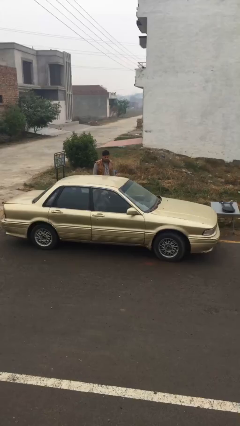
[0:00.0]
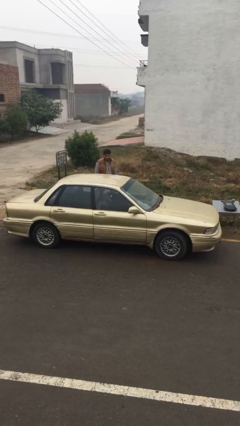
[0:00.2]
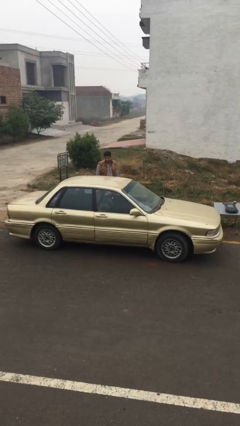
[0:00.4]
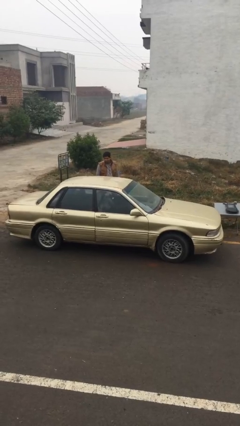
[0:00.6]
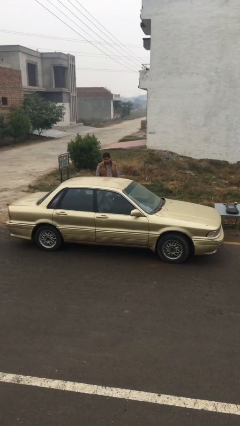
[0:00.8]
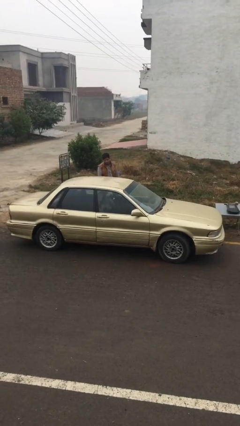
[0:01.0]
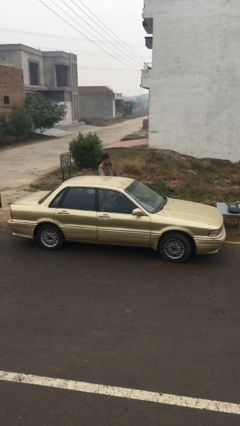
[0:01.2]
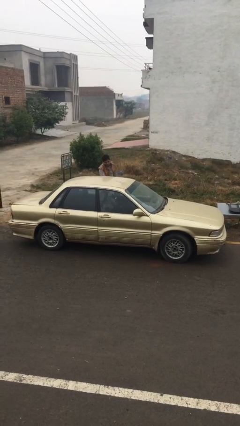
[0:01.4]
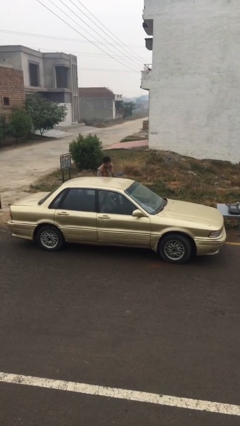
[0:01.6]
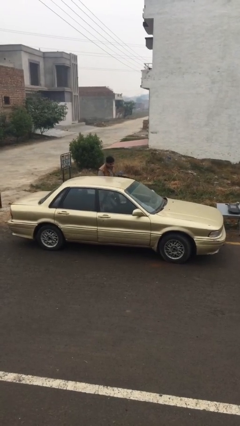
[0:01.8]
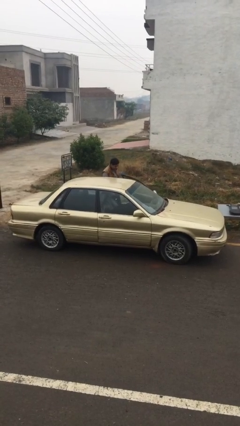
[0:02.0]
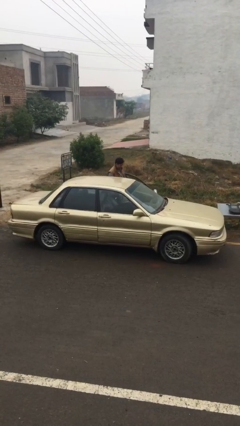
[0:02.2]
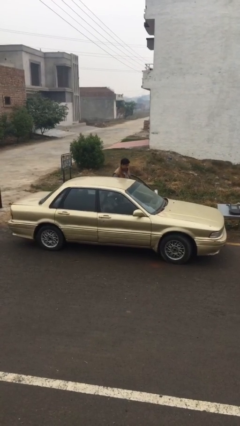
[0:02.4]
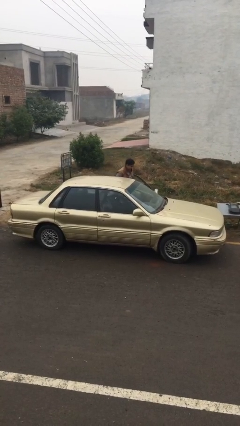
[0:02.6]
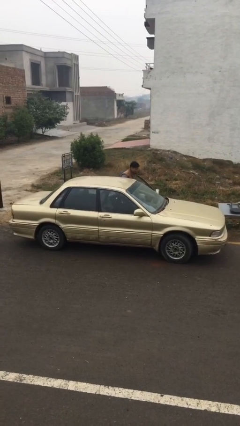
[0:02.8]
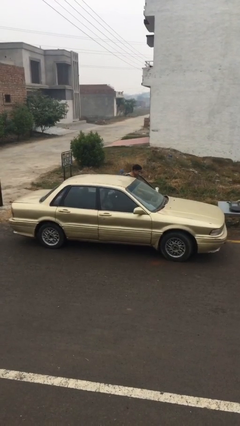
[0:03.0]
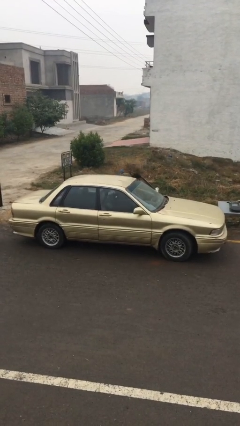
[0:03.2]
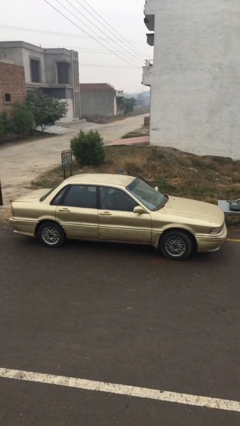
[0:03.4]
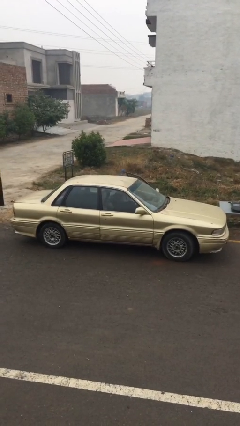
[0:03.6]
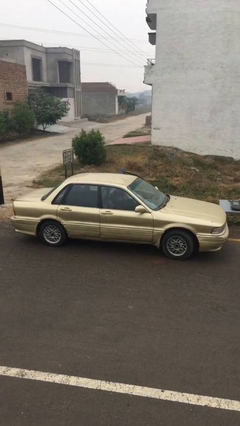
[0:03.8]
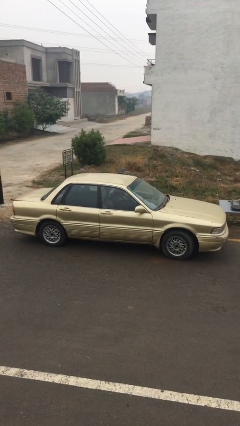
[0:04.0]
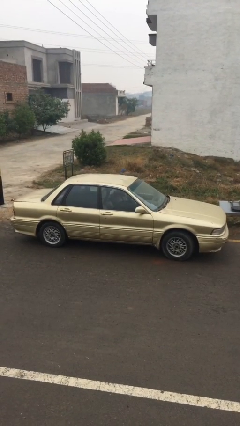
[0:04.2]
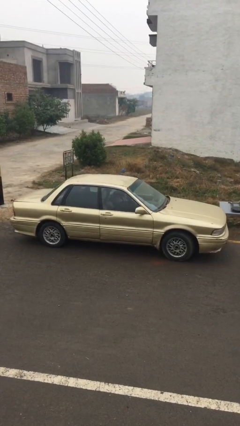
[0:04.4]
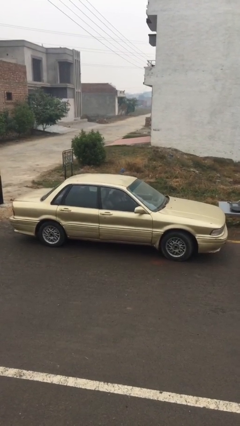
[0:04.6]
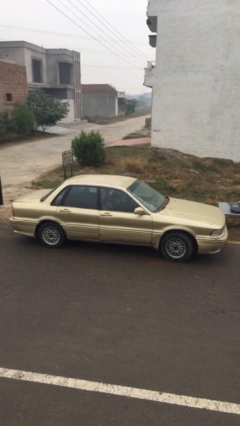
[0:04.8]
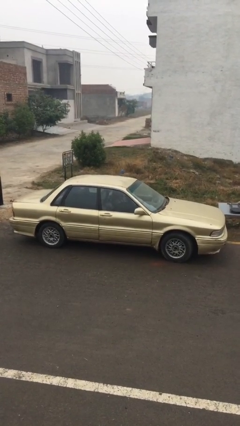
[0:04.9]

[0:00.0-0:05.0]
car picks up person

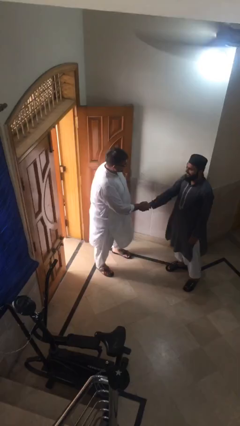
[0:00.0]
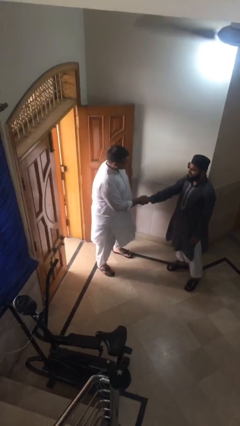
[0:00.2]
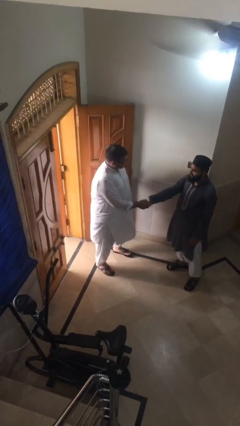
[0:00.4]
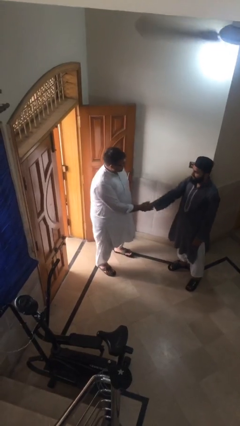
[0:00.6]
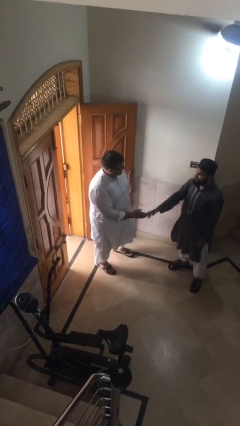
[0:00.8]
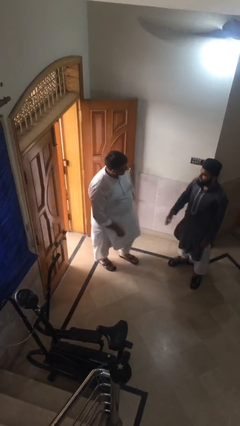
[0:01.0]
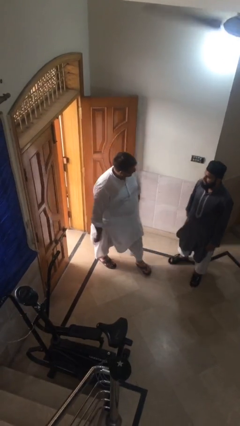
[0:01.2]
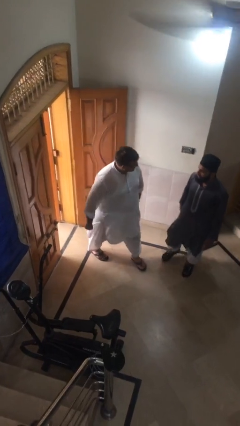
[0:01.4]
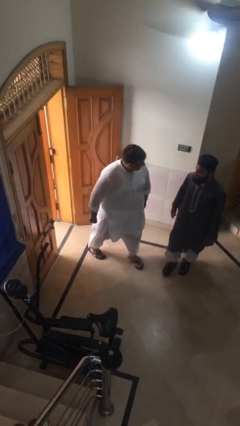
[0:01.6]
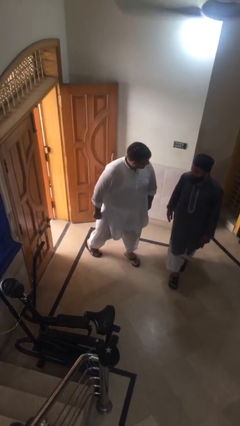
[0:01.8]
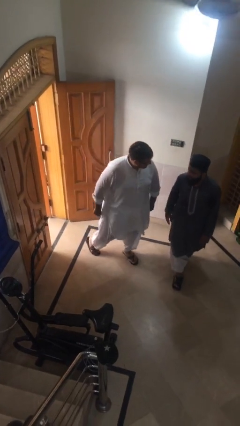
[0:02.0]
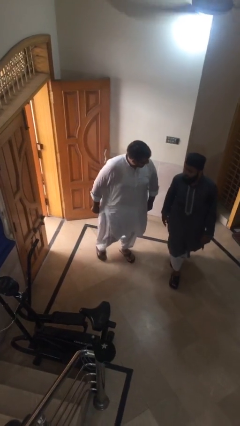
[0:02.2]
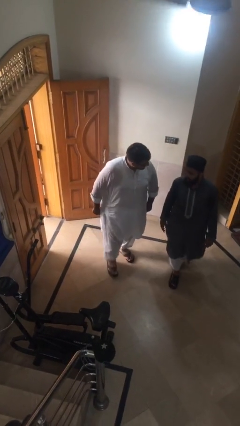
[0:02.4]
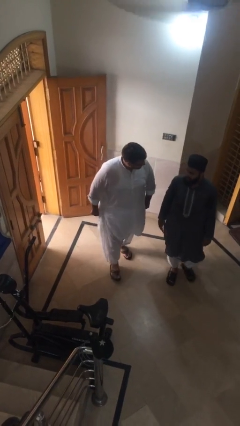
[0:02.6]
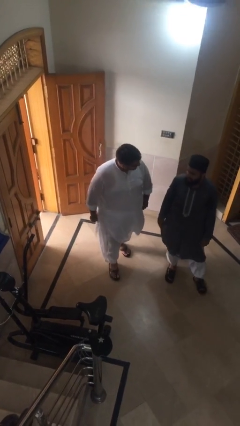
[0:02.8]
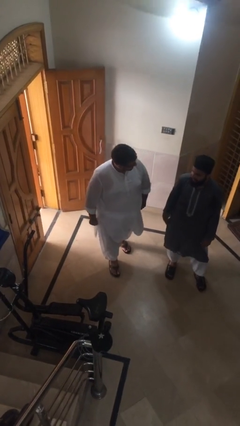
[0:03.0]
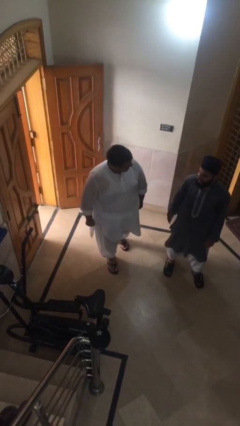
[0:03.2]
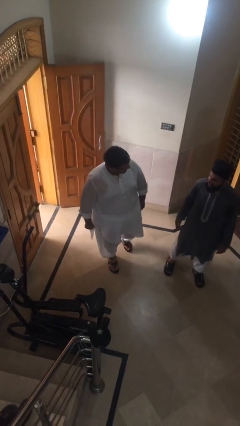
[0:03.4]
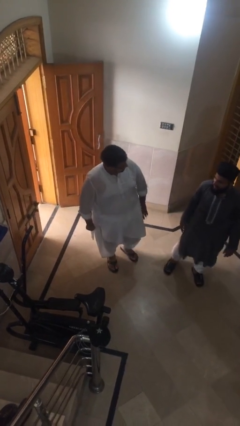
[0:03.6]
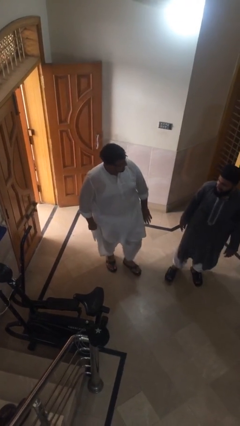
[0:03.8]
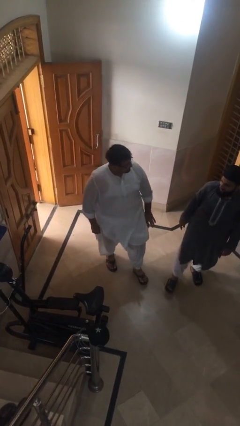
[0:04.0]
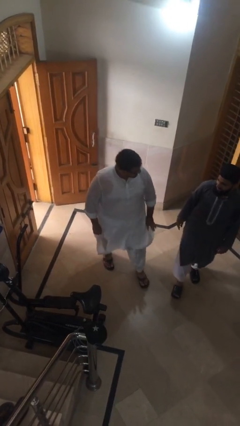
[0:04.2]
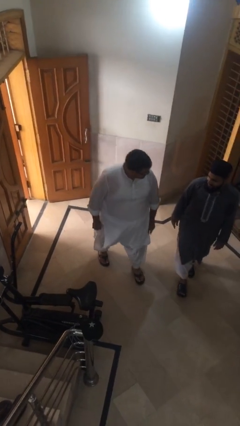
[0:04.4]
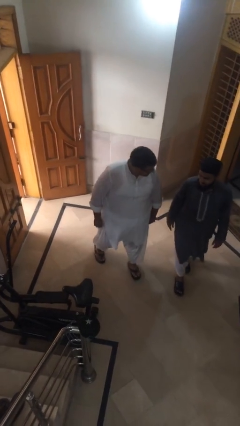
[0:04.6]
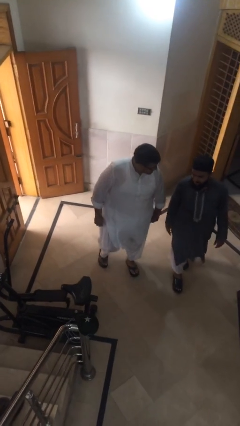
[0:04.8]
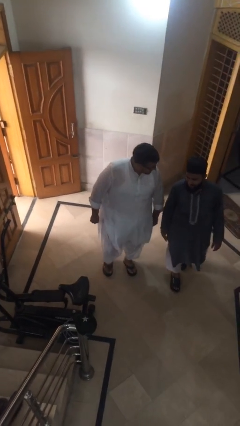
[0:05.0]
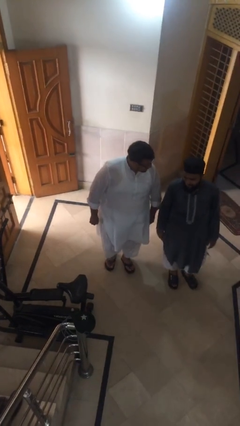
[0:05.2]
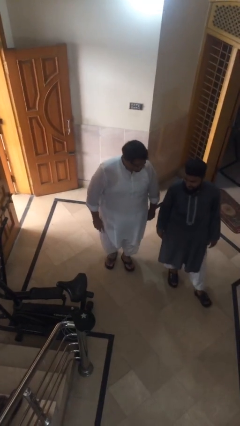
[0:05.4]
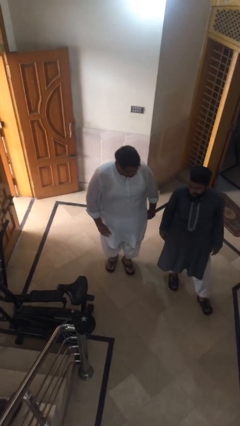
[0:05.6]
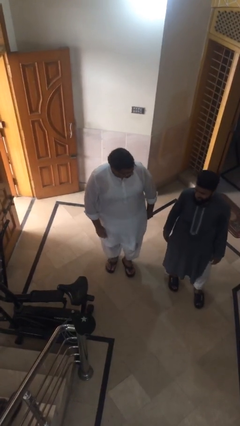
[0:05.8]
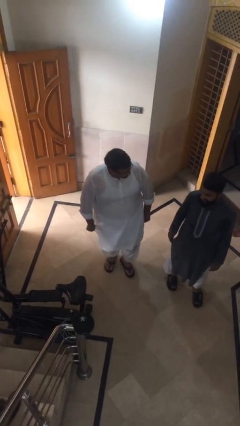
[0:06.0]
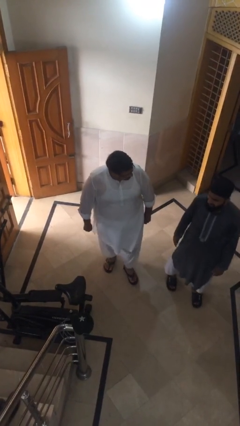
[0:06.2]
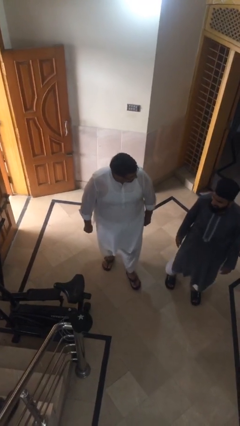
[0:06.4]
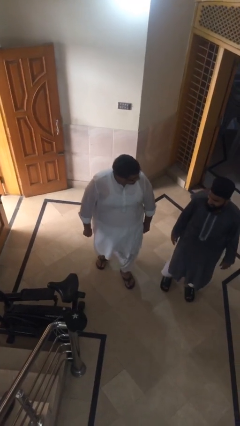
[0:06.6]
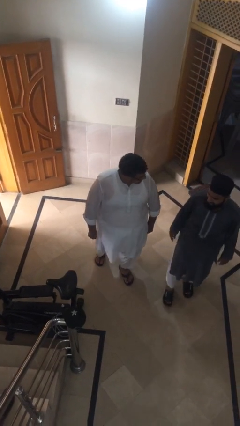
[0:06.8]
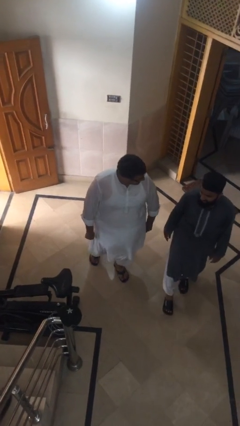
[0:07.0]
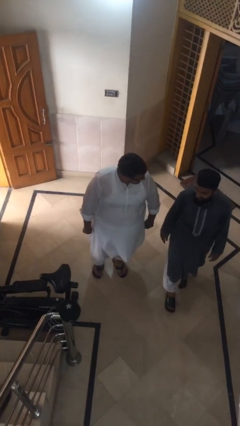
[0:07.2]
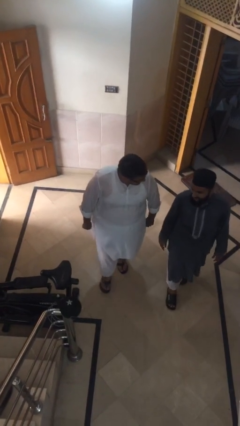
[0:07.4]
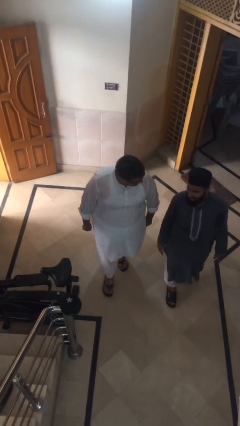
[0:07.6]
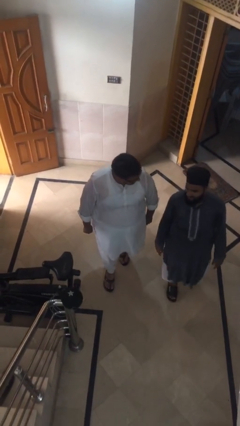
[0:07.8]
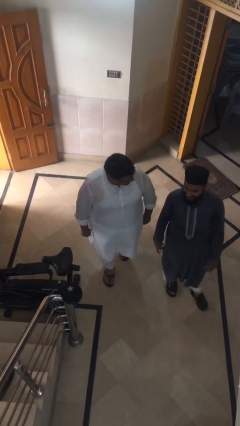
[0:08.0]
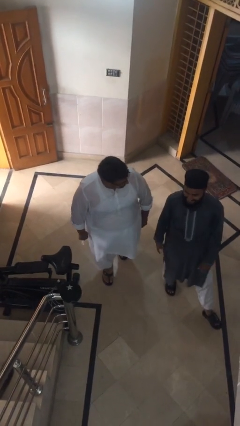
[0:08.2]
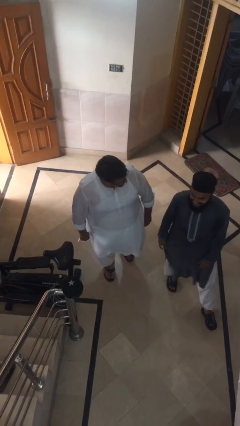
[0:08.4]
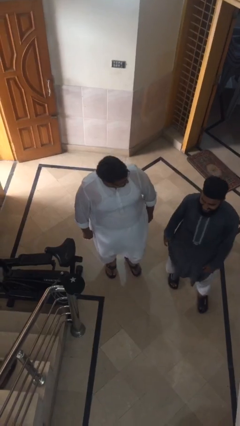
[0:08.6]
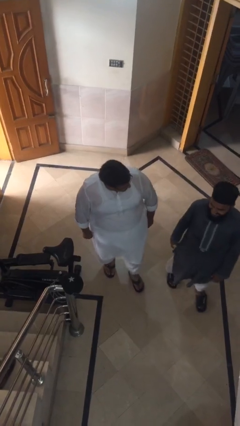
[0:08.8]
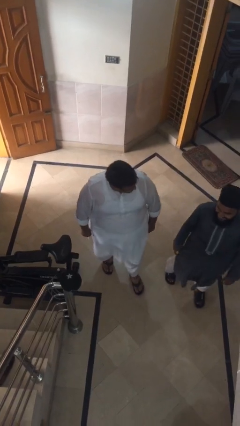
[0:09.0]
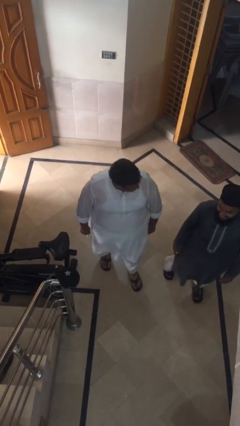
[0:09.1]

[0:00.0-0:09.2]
person talks to person

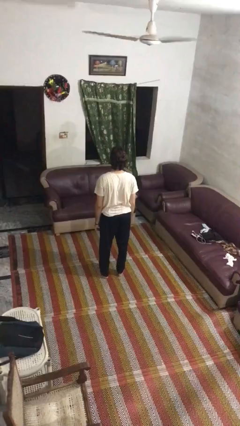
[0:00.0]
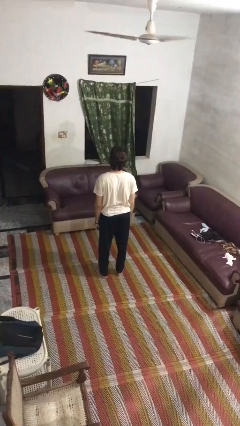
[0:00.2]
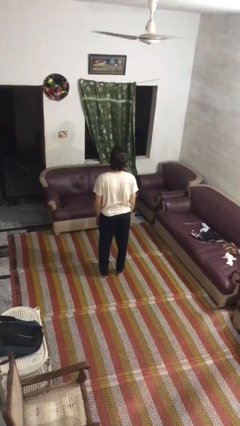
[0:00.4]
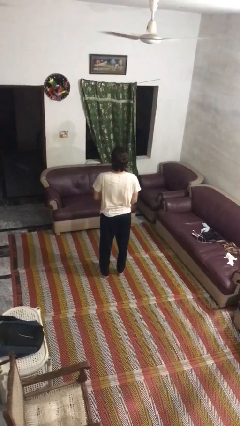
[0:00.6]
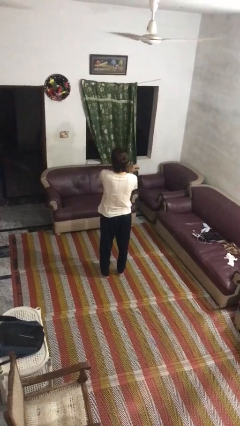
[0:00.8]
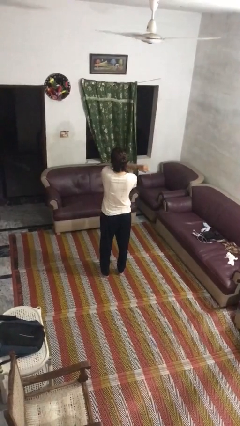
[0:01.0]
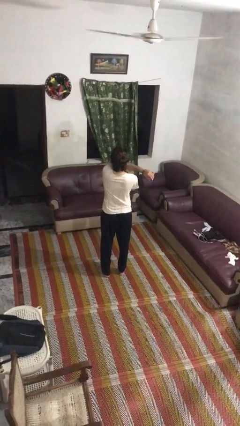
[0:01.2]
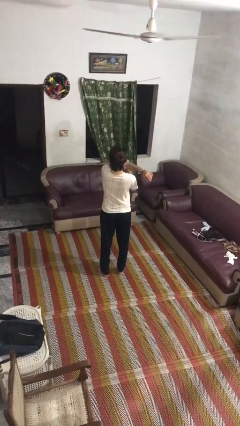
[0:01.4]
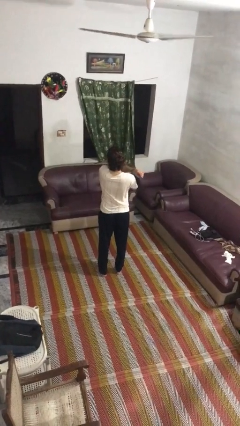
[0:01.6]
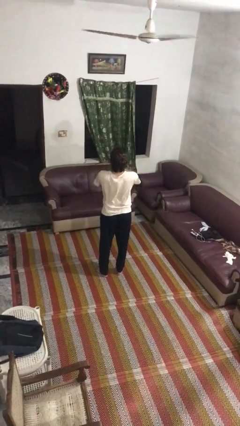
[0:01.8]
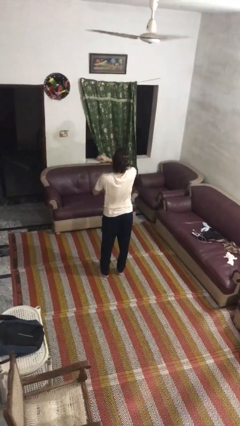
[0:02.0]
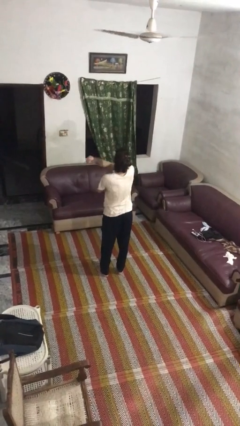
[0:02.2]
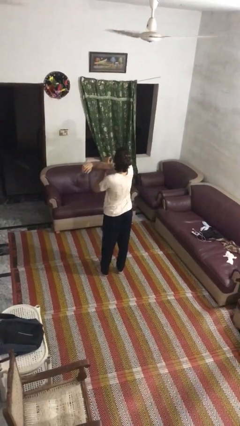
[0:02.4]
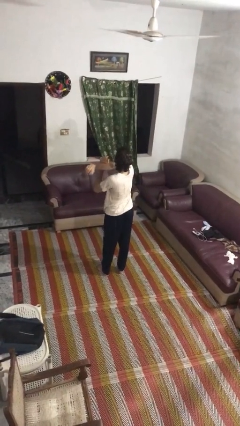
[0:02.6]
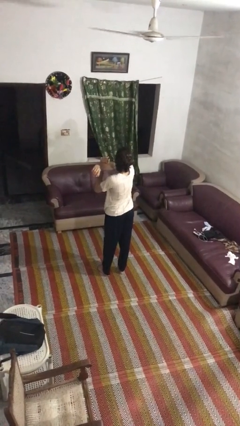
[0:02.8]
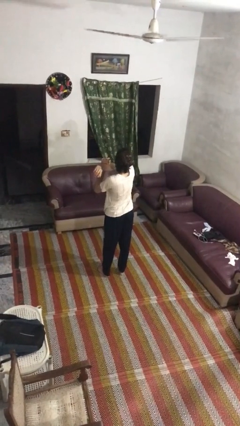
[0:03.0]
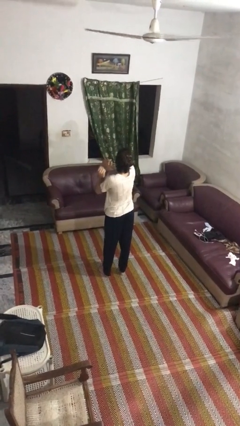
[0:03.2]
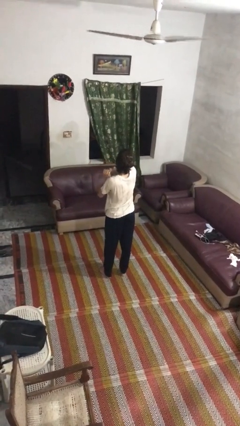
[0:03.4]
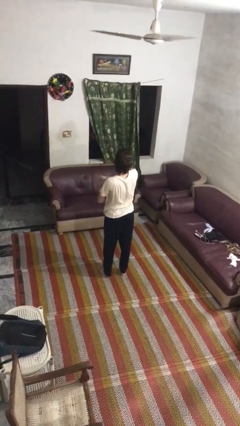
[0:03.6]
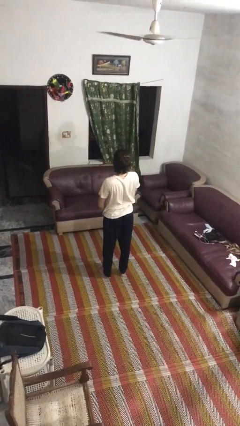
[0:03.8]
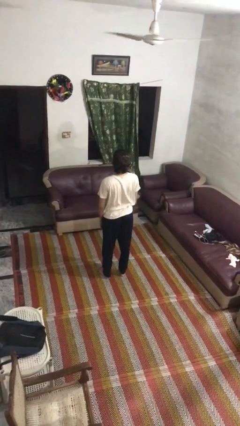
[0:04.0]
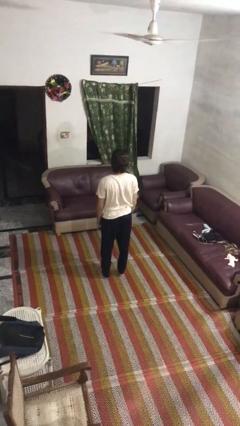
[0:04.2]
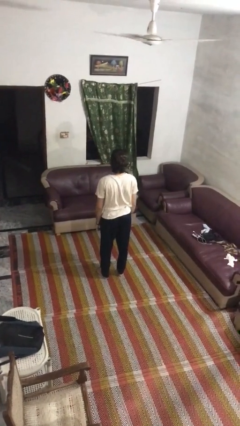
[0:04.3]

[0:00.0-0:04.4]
person stretches arms to side
